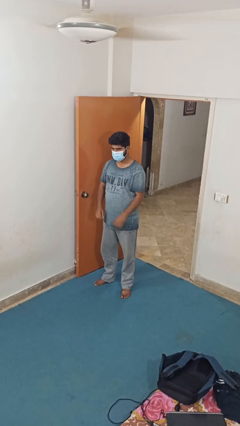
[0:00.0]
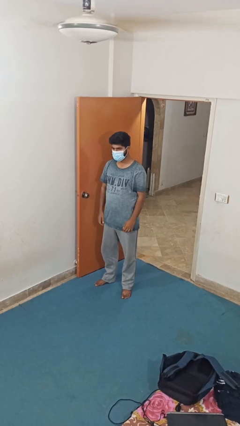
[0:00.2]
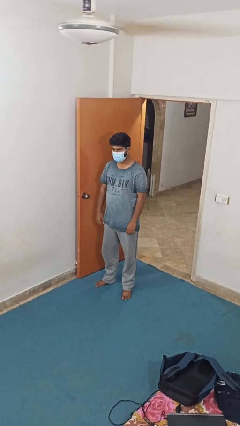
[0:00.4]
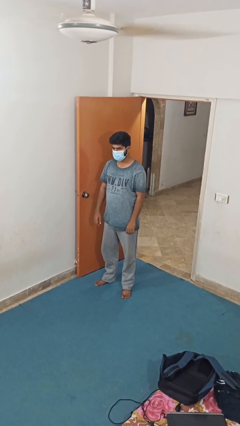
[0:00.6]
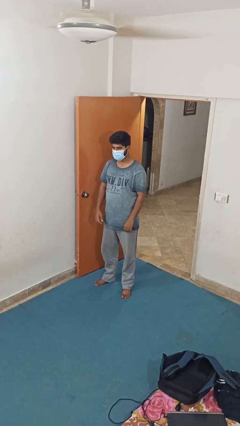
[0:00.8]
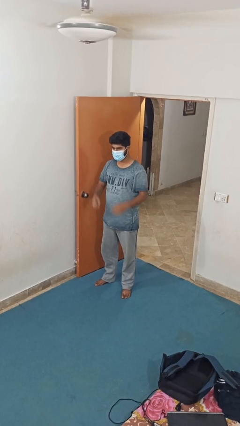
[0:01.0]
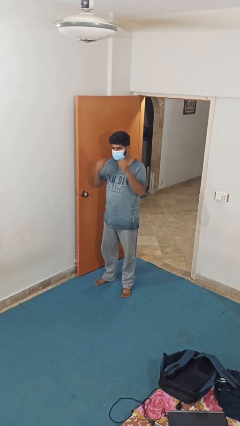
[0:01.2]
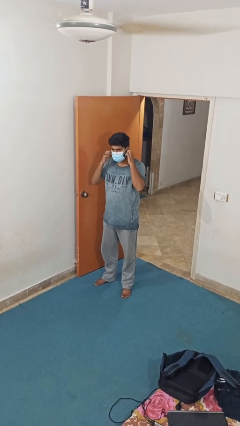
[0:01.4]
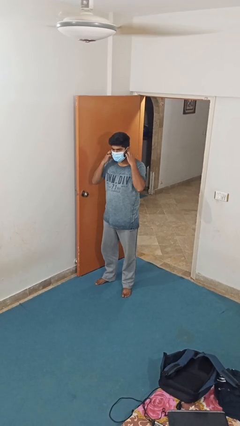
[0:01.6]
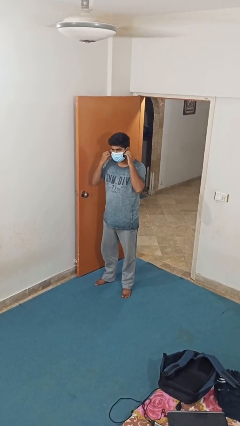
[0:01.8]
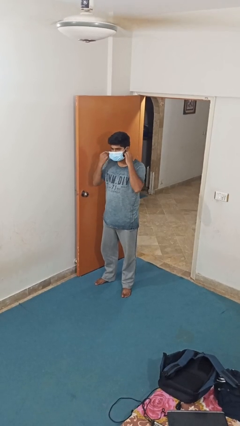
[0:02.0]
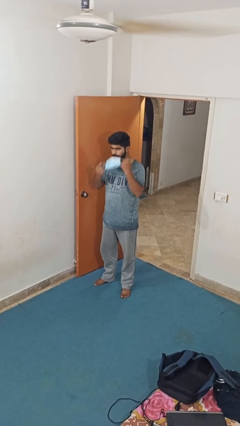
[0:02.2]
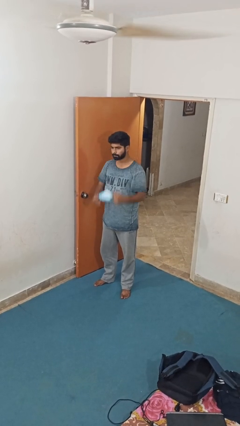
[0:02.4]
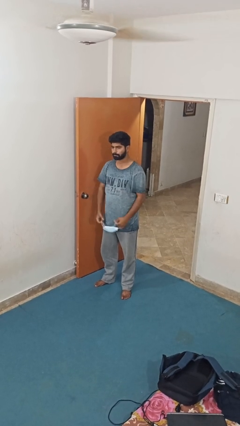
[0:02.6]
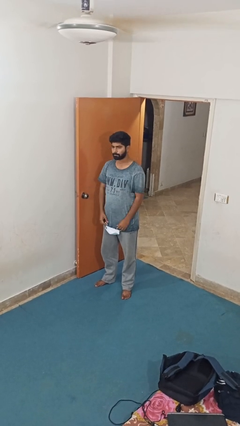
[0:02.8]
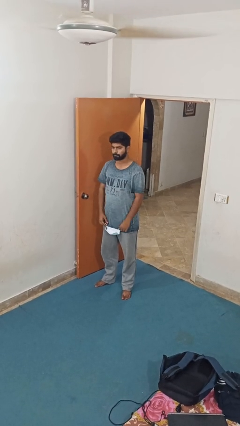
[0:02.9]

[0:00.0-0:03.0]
person takes off facemask

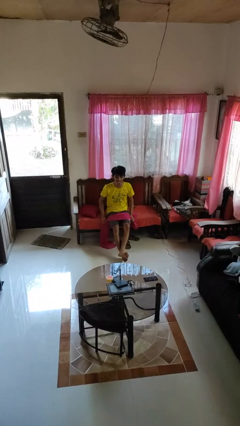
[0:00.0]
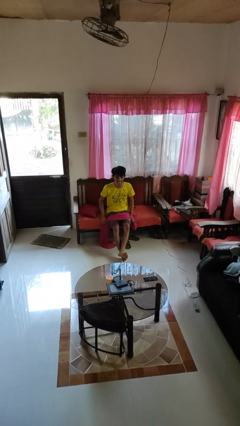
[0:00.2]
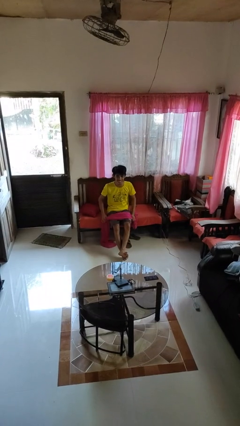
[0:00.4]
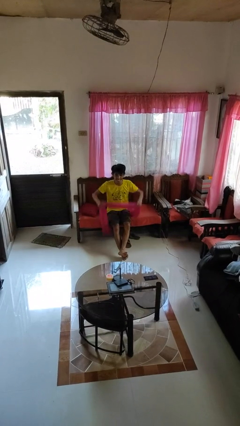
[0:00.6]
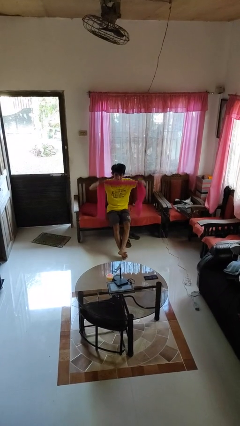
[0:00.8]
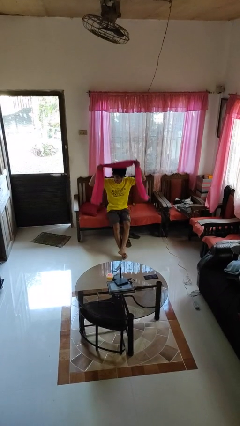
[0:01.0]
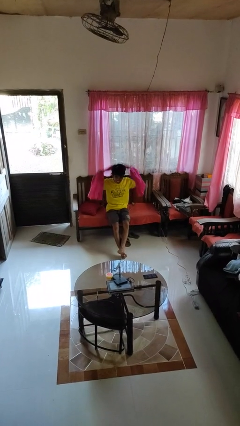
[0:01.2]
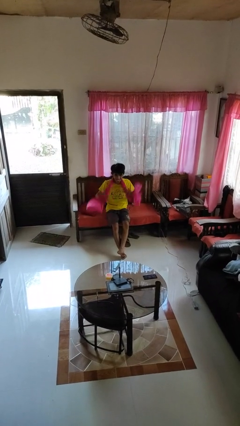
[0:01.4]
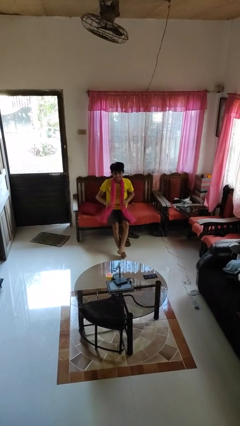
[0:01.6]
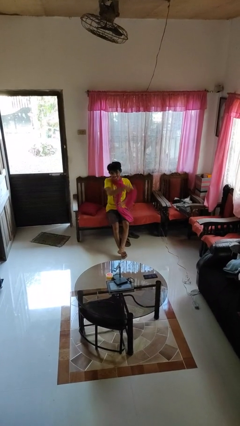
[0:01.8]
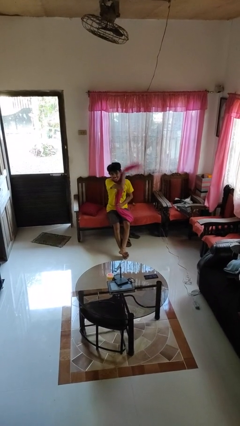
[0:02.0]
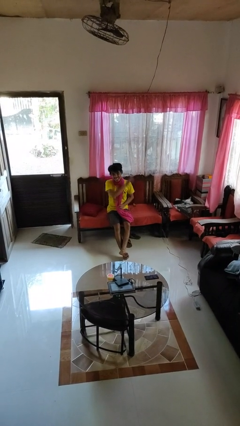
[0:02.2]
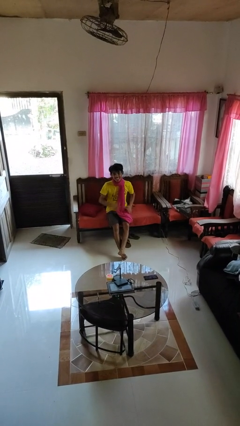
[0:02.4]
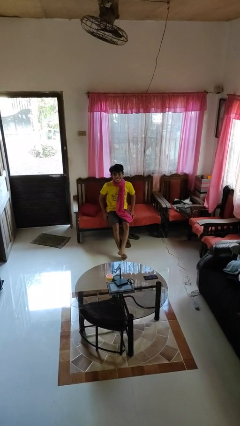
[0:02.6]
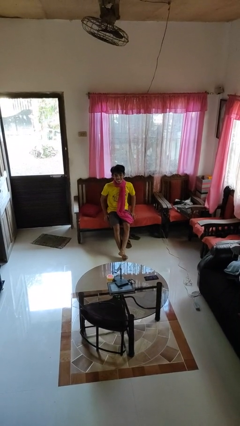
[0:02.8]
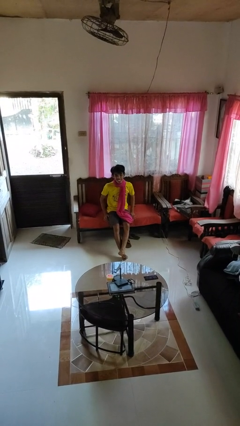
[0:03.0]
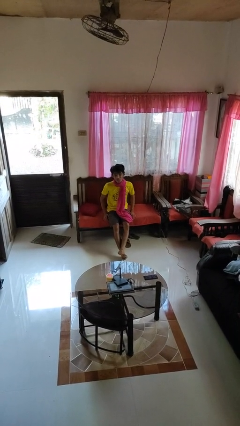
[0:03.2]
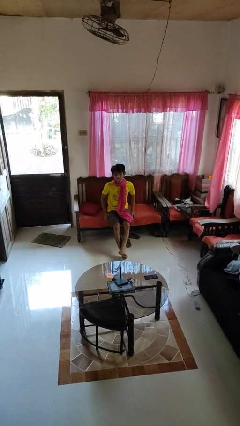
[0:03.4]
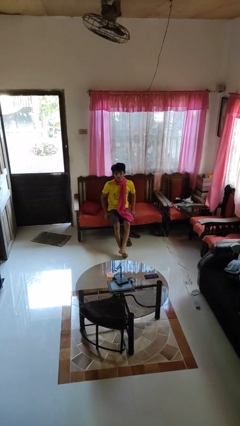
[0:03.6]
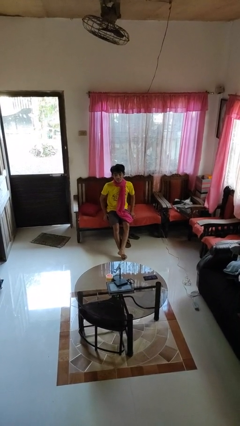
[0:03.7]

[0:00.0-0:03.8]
person puts on scarf

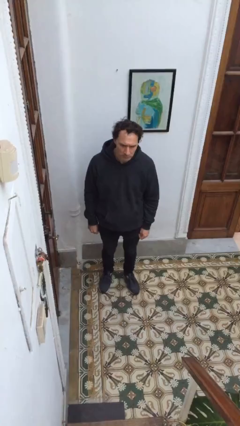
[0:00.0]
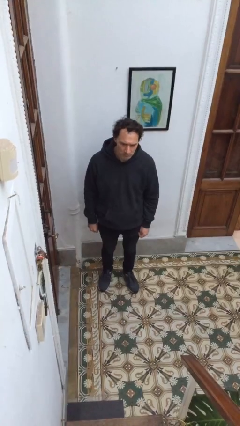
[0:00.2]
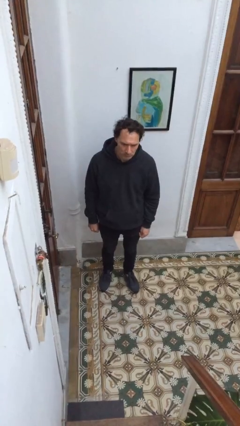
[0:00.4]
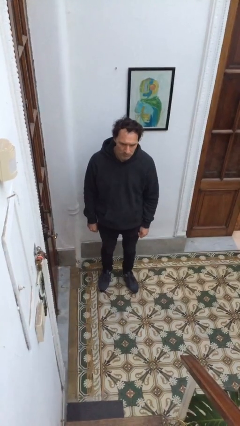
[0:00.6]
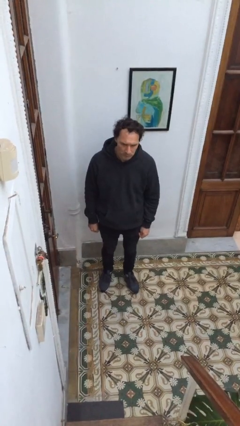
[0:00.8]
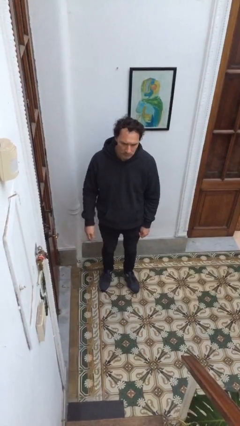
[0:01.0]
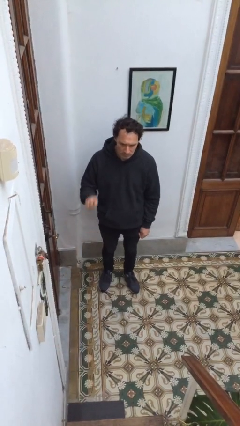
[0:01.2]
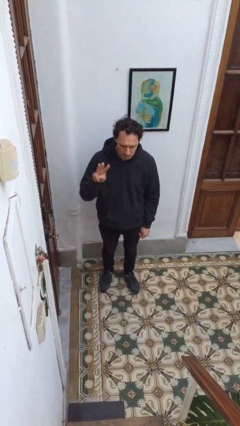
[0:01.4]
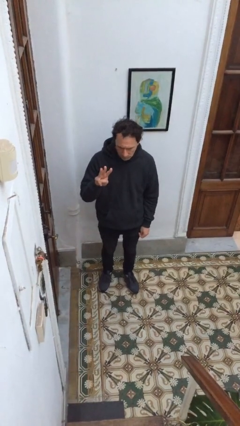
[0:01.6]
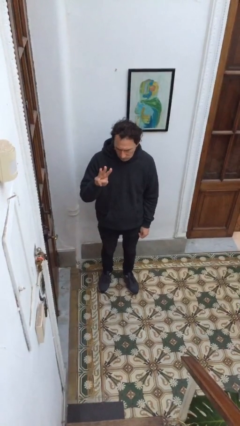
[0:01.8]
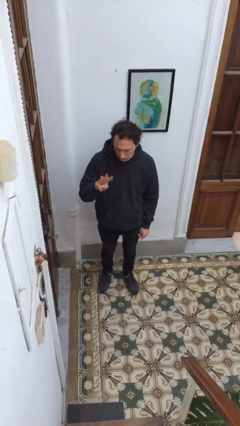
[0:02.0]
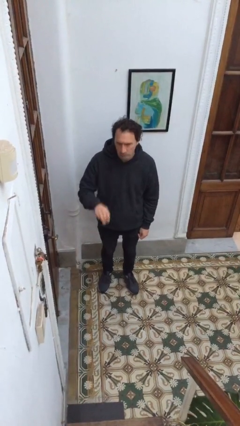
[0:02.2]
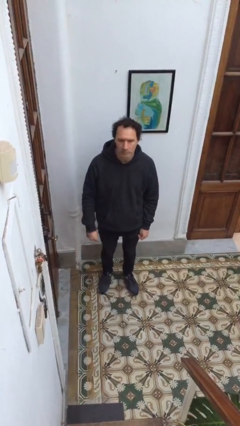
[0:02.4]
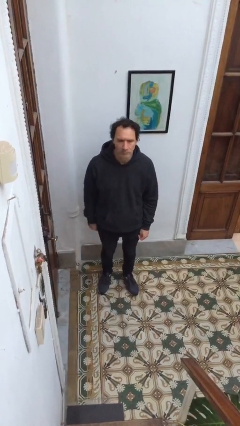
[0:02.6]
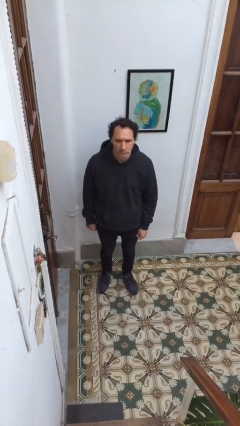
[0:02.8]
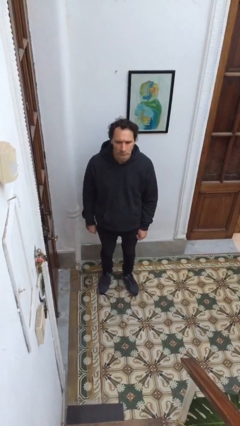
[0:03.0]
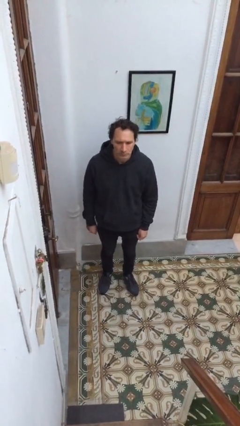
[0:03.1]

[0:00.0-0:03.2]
person gestures number three

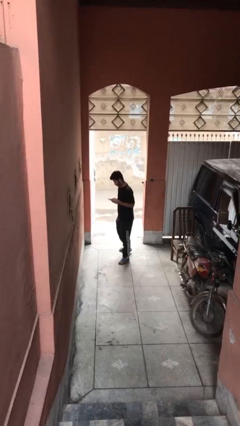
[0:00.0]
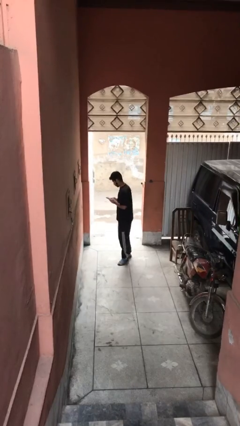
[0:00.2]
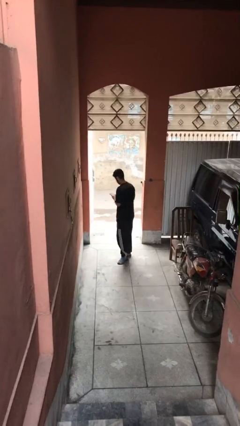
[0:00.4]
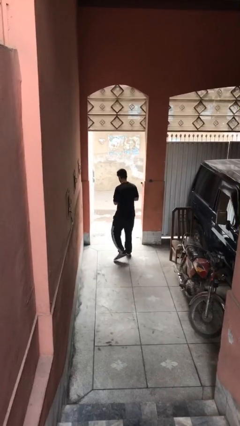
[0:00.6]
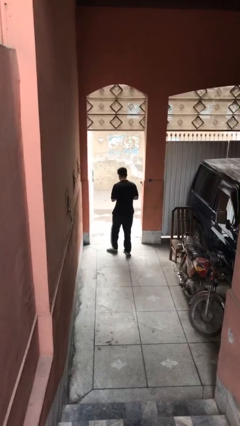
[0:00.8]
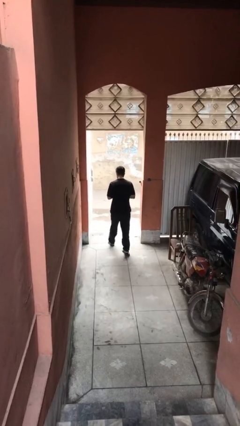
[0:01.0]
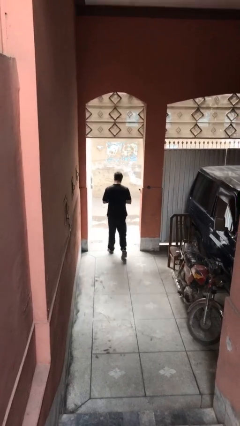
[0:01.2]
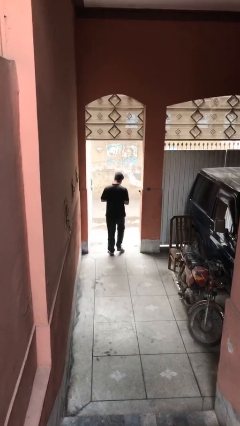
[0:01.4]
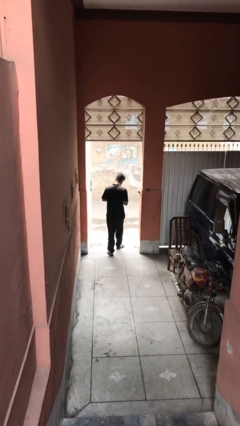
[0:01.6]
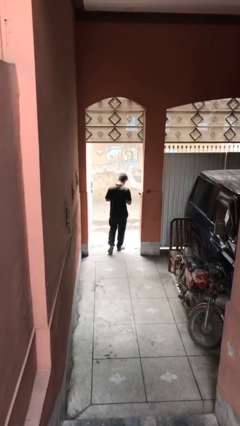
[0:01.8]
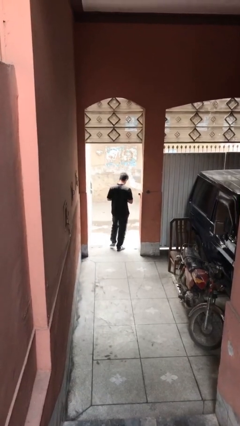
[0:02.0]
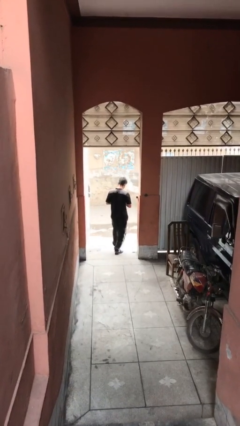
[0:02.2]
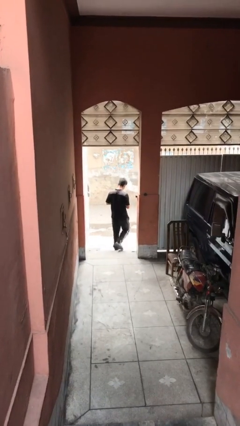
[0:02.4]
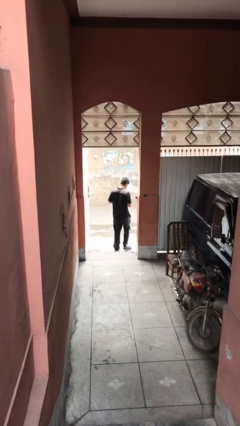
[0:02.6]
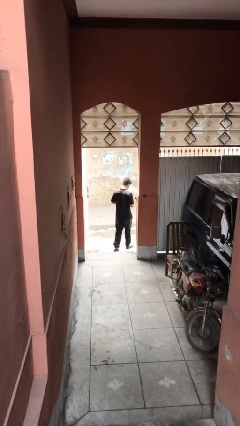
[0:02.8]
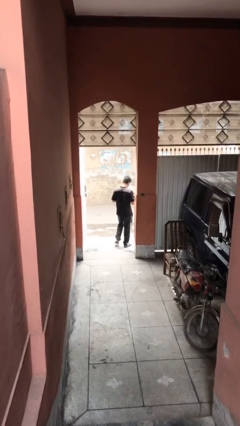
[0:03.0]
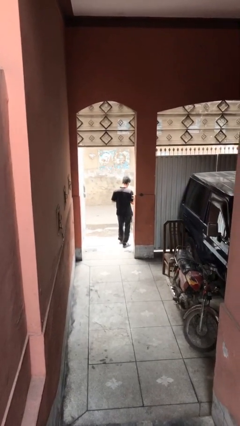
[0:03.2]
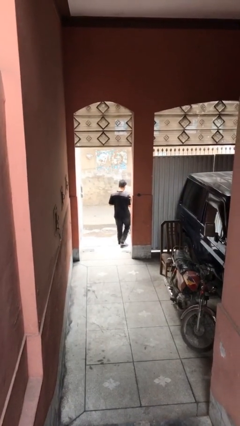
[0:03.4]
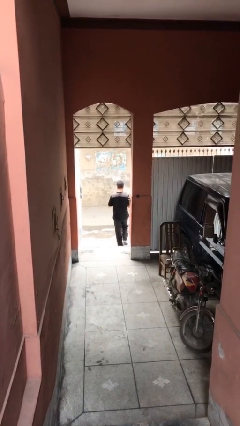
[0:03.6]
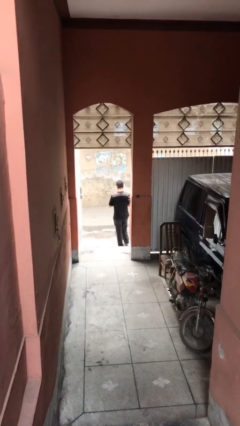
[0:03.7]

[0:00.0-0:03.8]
person exits scene through structure

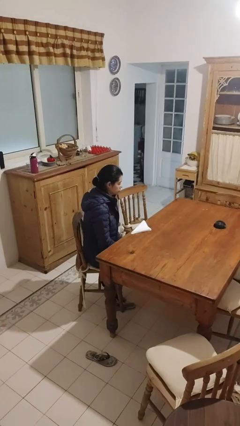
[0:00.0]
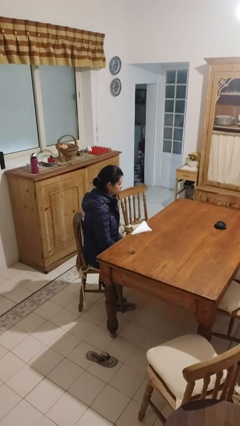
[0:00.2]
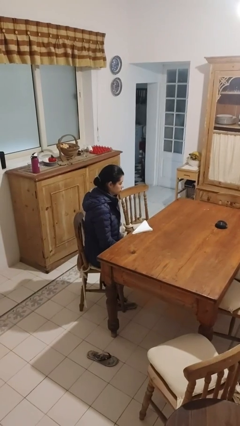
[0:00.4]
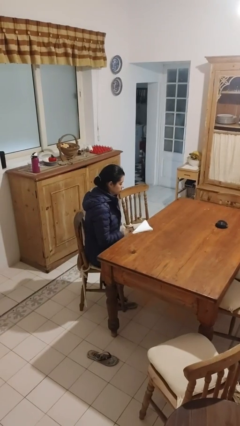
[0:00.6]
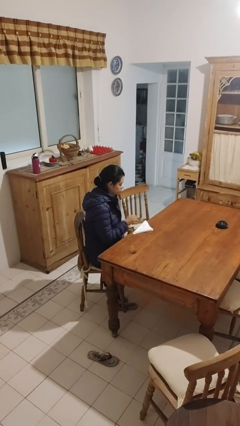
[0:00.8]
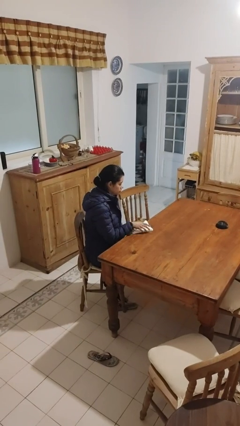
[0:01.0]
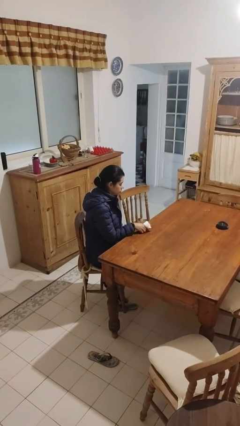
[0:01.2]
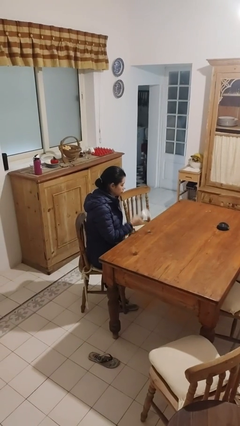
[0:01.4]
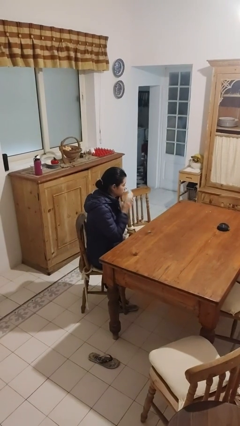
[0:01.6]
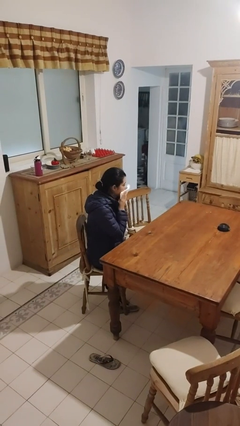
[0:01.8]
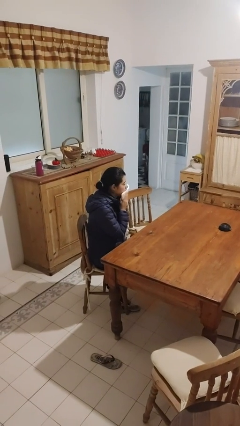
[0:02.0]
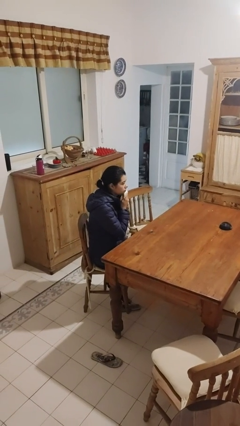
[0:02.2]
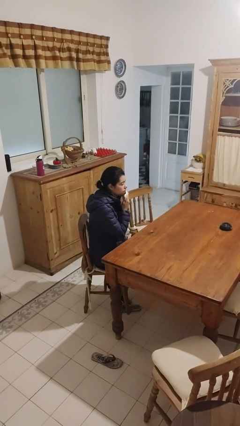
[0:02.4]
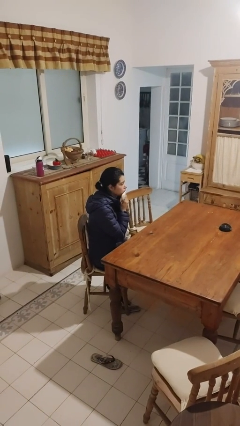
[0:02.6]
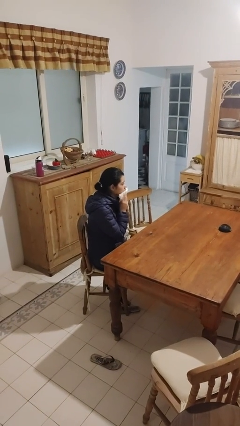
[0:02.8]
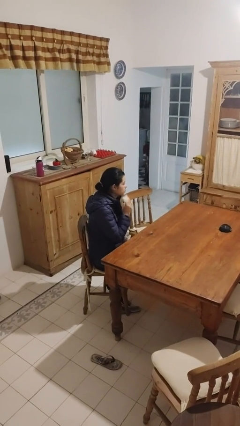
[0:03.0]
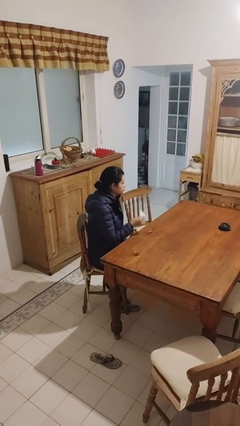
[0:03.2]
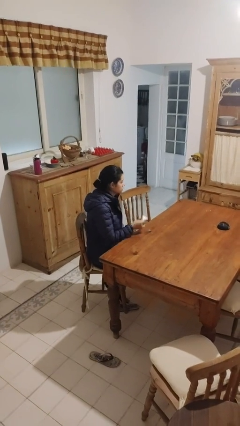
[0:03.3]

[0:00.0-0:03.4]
person wipes mouth with napkin

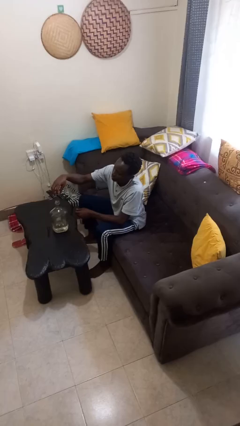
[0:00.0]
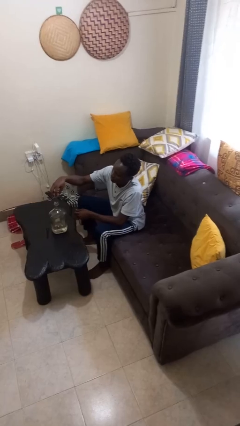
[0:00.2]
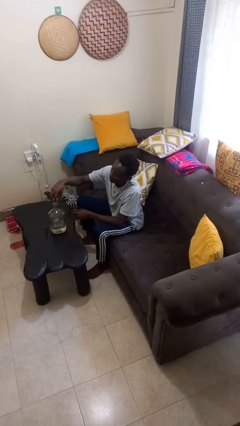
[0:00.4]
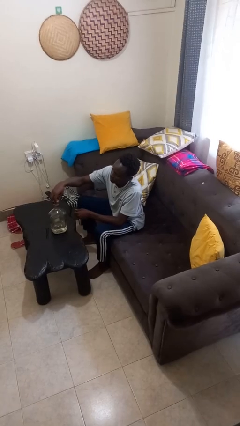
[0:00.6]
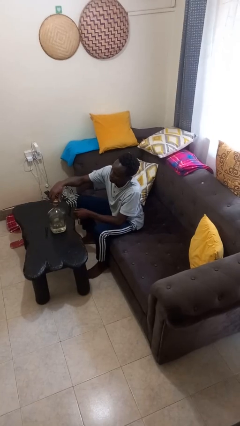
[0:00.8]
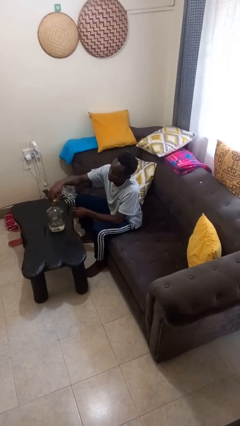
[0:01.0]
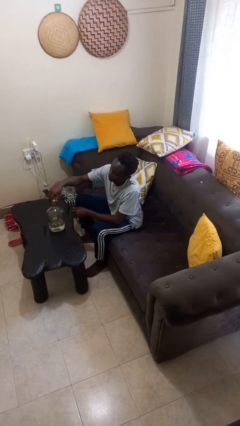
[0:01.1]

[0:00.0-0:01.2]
person screws lid to bottle
